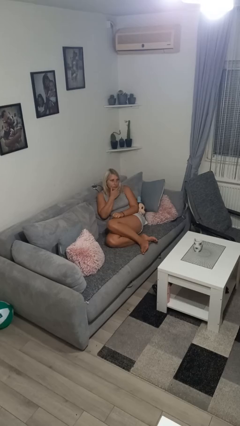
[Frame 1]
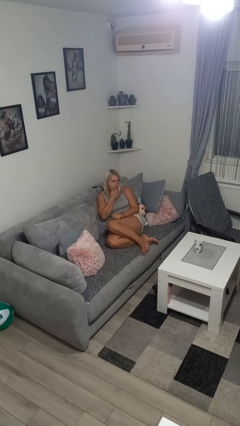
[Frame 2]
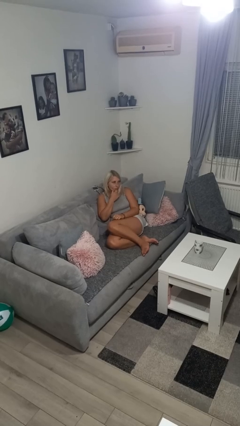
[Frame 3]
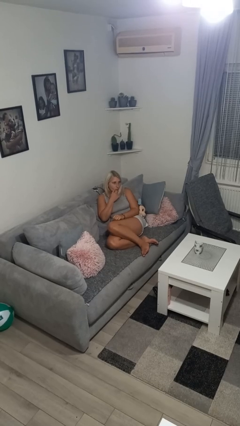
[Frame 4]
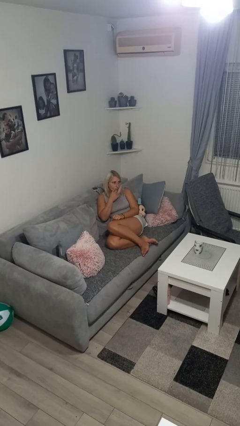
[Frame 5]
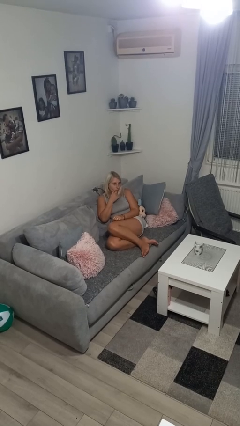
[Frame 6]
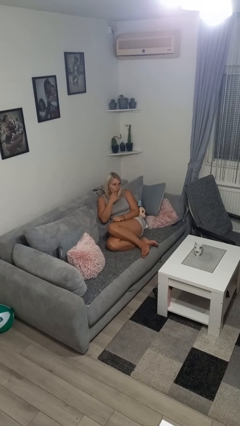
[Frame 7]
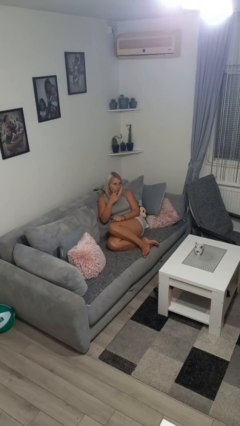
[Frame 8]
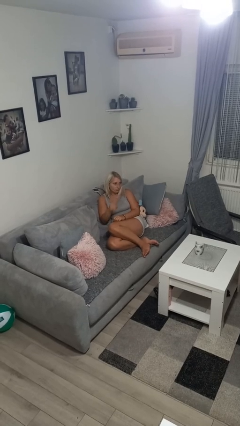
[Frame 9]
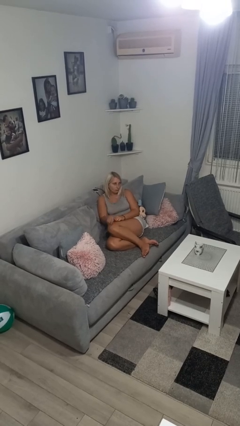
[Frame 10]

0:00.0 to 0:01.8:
person strokes chin

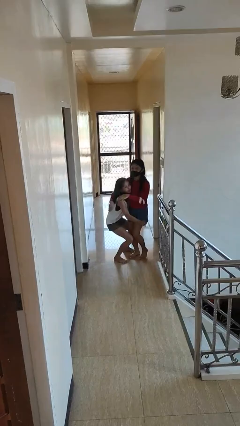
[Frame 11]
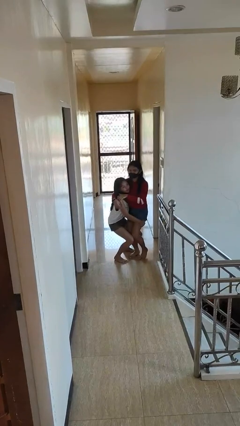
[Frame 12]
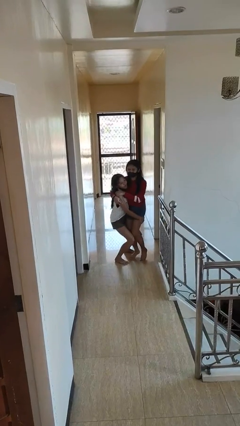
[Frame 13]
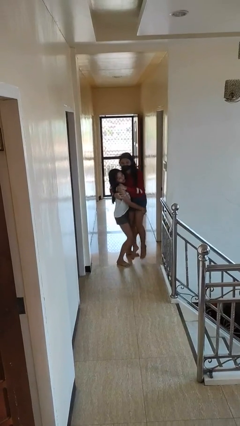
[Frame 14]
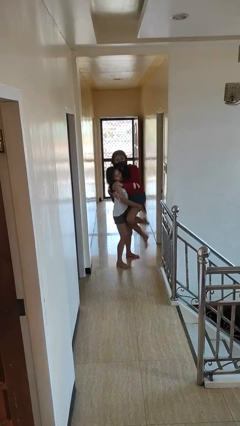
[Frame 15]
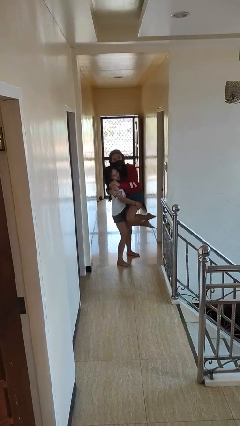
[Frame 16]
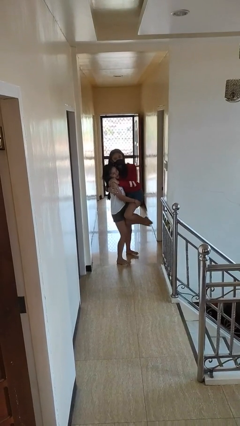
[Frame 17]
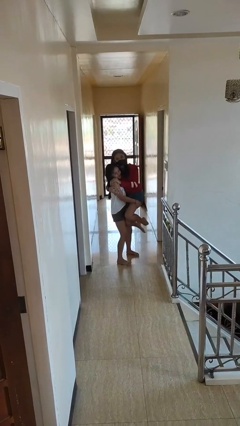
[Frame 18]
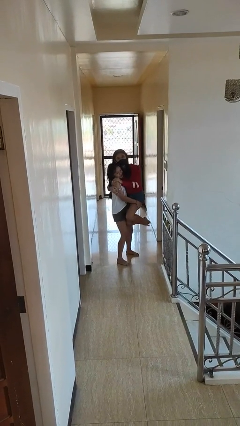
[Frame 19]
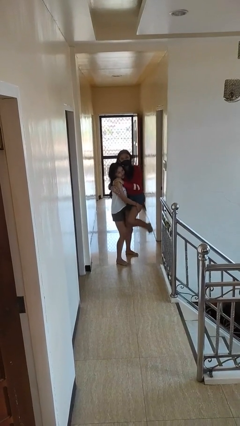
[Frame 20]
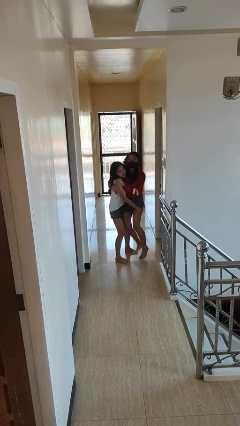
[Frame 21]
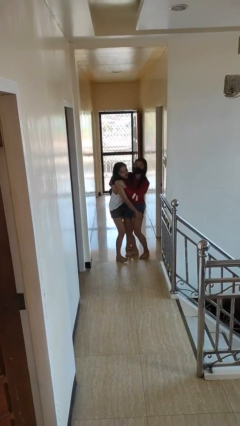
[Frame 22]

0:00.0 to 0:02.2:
person picks up person

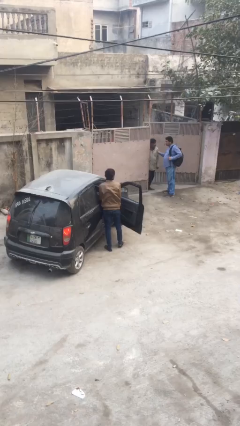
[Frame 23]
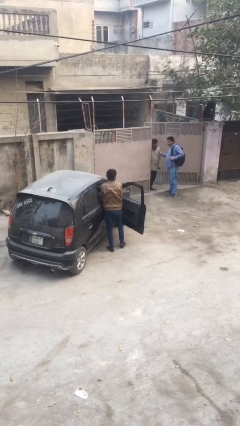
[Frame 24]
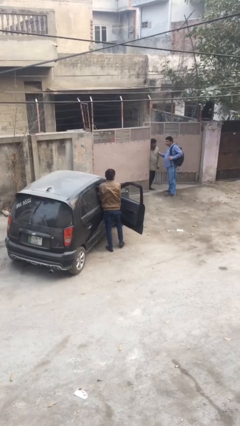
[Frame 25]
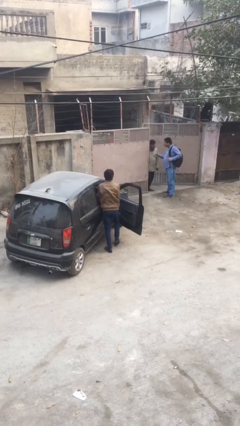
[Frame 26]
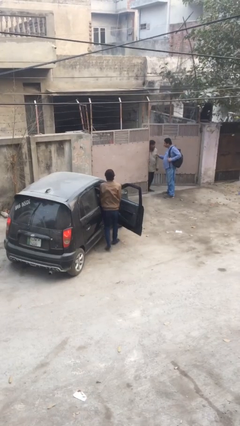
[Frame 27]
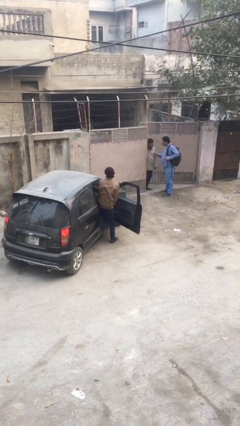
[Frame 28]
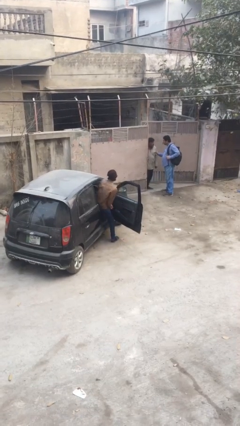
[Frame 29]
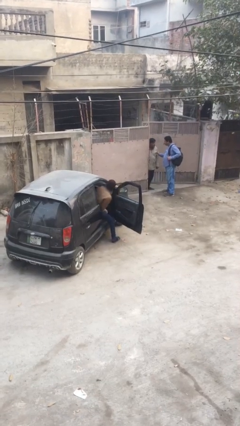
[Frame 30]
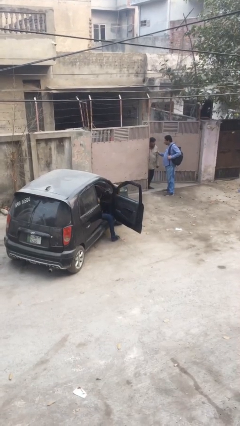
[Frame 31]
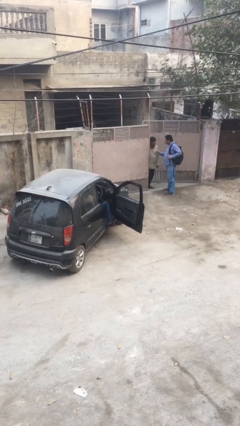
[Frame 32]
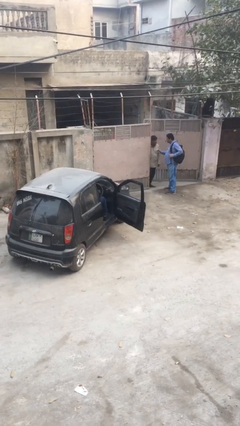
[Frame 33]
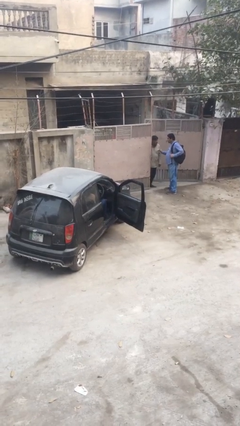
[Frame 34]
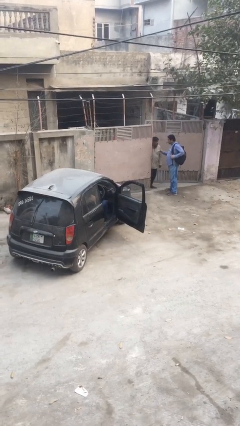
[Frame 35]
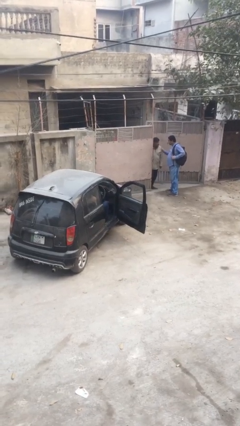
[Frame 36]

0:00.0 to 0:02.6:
person enters car

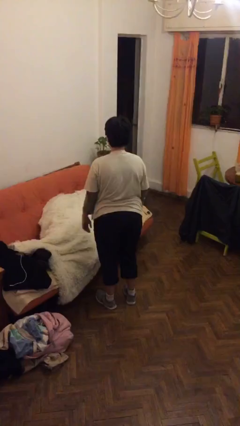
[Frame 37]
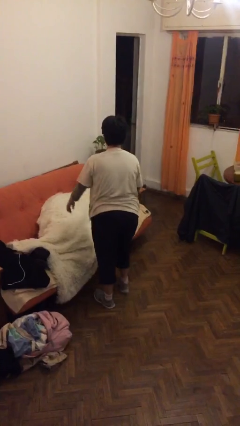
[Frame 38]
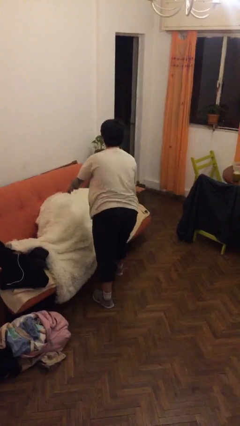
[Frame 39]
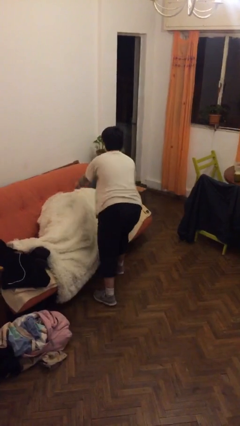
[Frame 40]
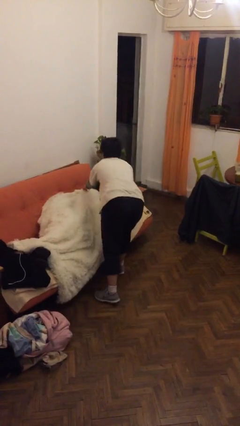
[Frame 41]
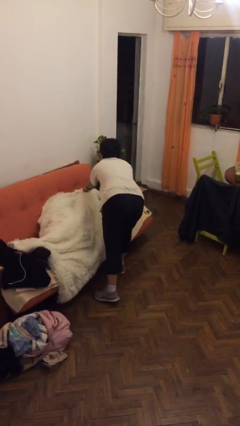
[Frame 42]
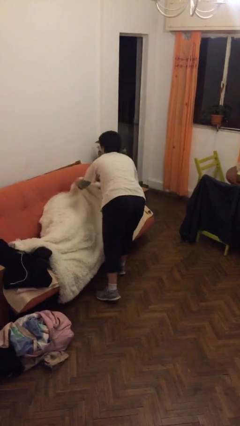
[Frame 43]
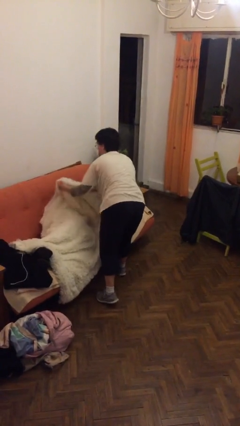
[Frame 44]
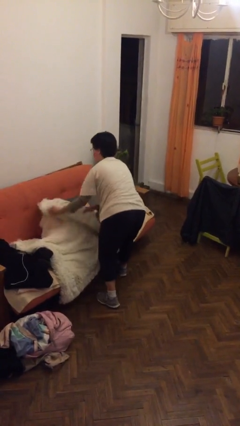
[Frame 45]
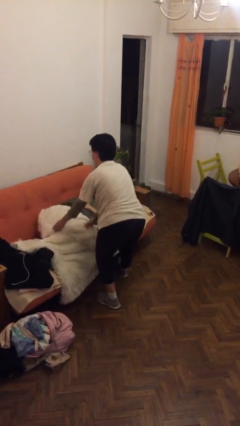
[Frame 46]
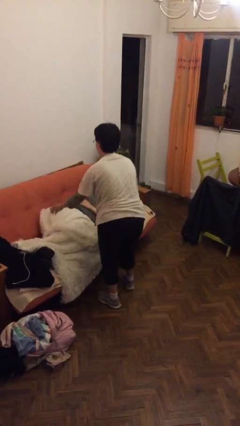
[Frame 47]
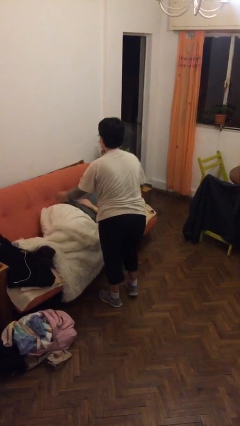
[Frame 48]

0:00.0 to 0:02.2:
person uncovers friend with blanket

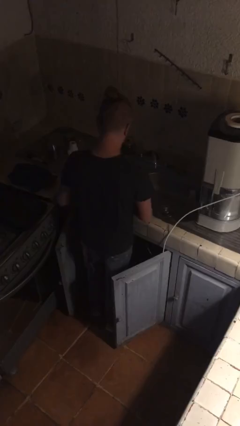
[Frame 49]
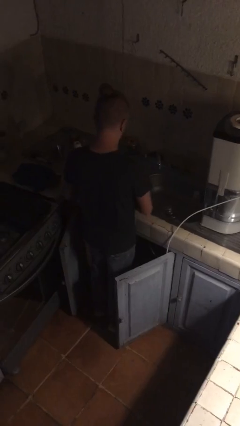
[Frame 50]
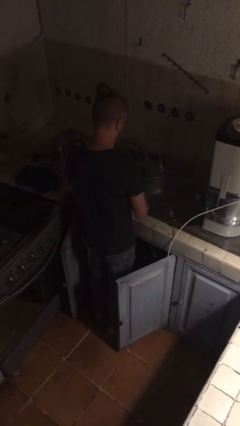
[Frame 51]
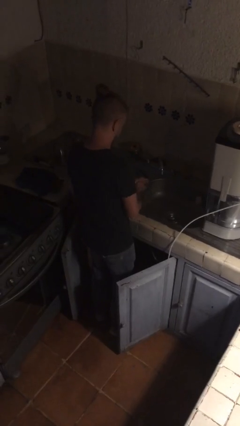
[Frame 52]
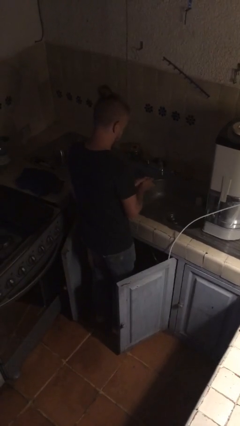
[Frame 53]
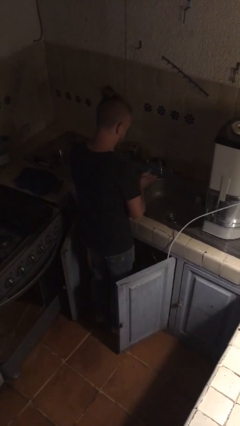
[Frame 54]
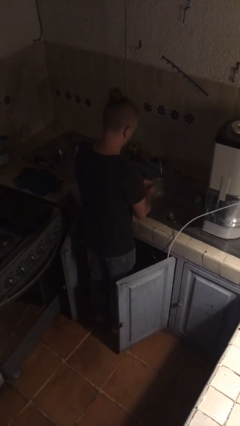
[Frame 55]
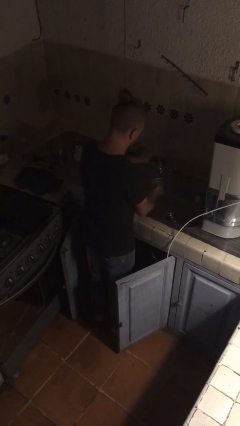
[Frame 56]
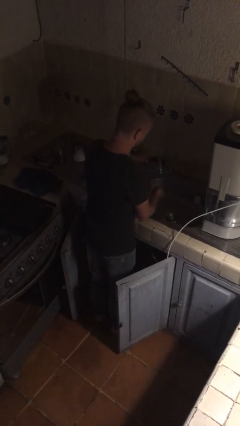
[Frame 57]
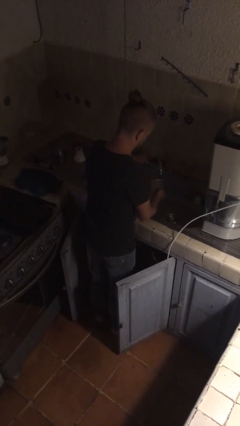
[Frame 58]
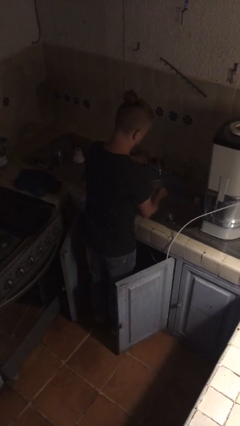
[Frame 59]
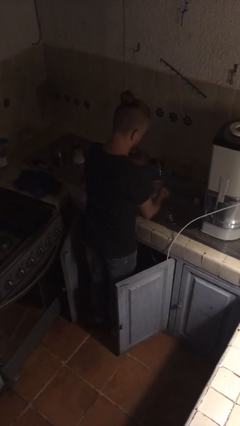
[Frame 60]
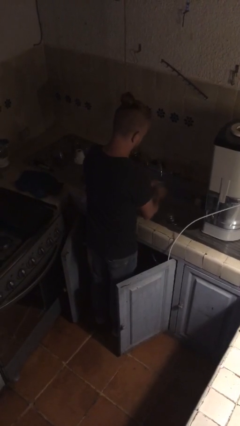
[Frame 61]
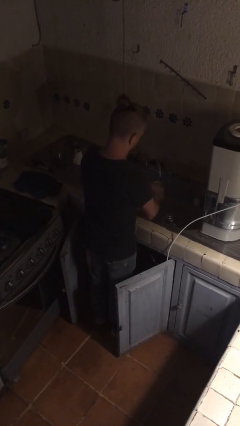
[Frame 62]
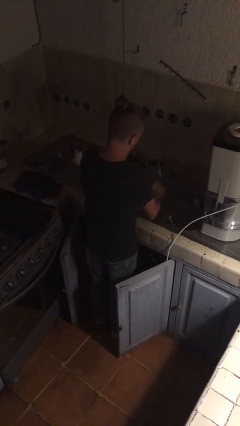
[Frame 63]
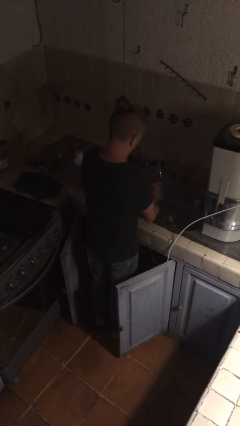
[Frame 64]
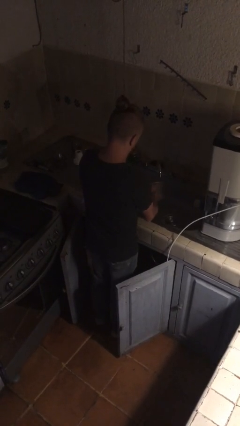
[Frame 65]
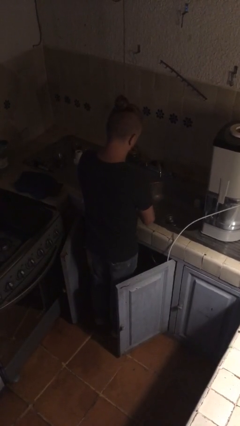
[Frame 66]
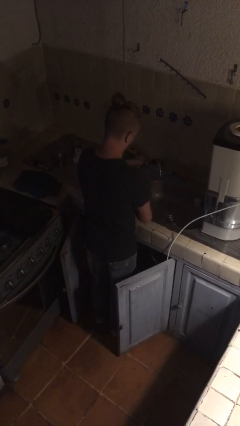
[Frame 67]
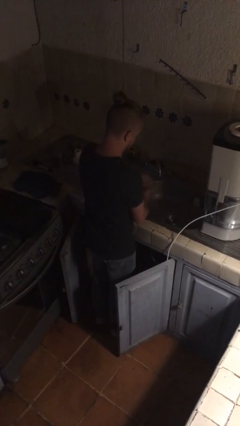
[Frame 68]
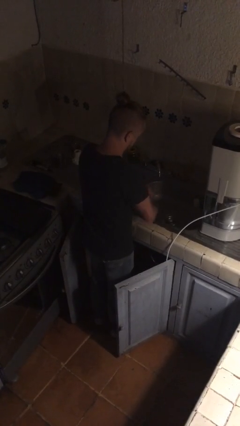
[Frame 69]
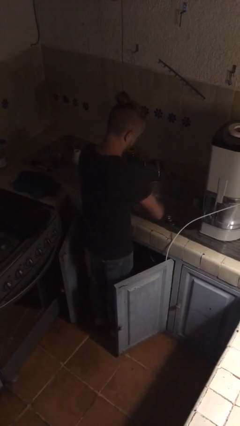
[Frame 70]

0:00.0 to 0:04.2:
person washes hands

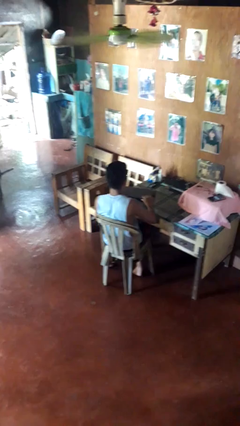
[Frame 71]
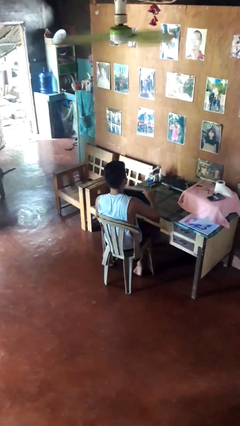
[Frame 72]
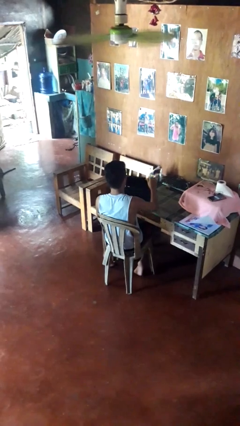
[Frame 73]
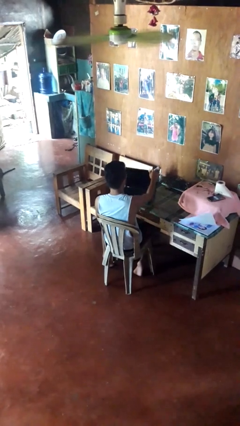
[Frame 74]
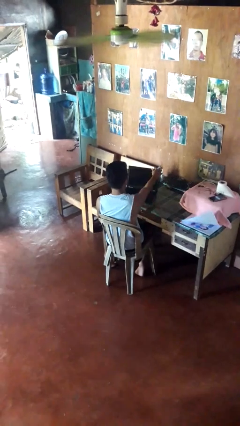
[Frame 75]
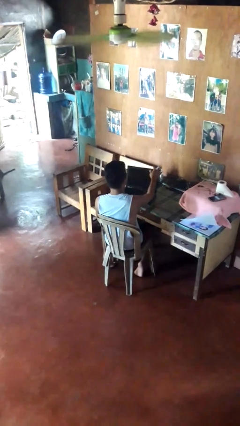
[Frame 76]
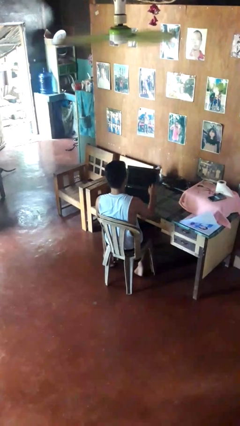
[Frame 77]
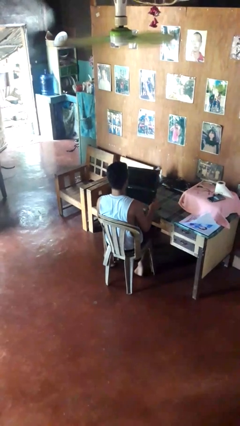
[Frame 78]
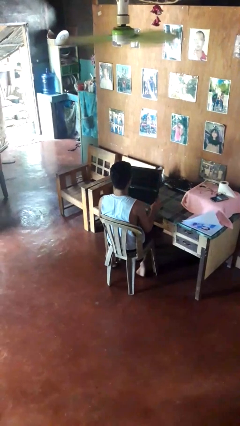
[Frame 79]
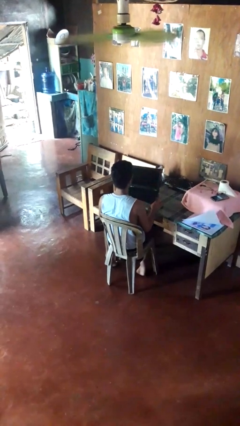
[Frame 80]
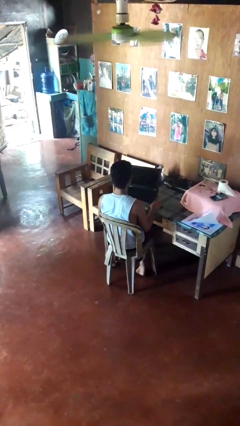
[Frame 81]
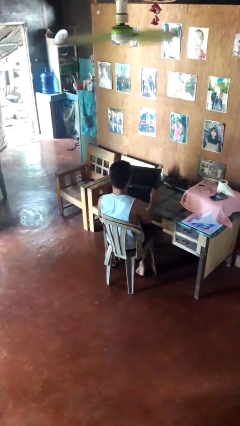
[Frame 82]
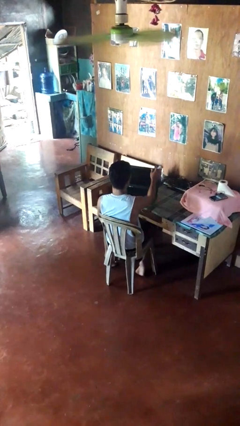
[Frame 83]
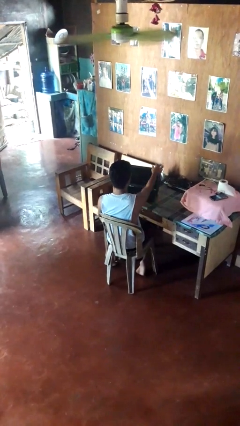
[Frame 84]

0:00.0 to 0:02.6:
person opens laptop

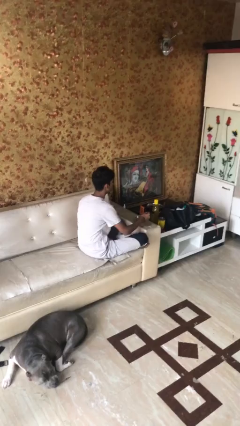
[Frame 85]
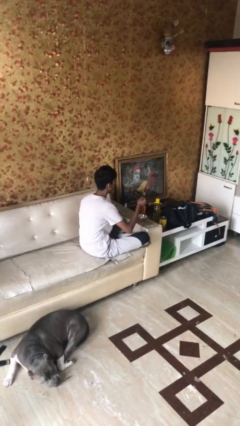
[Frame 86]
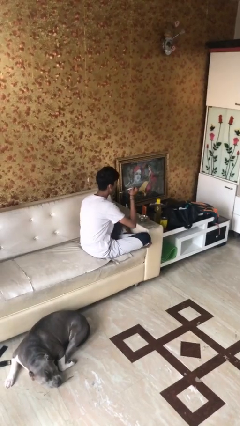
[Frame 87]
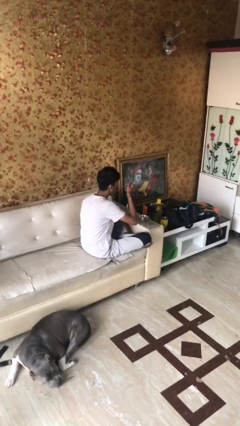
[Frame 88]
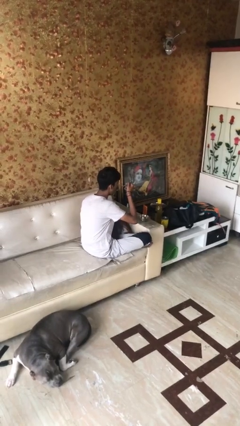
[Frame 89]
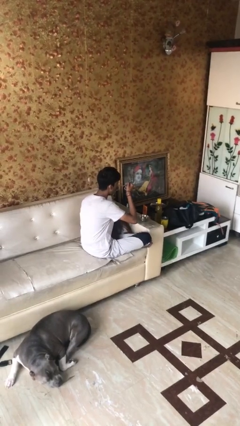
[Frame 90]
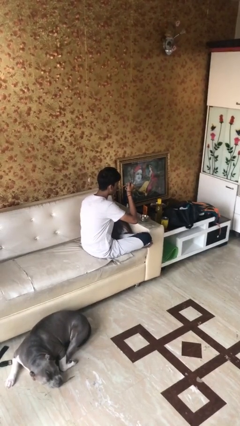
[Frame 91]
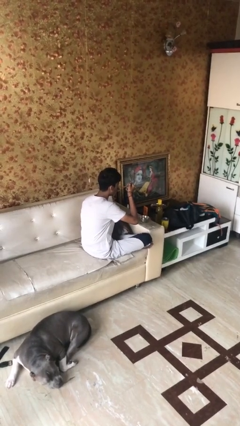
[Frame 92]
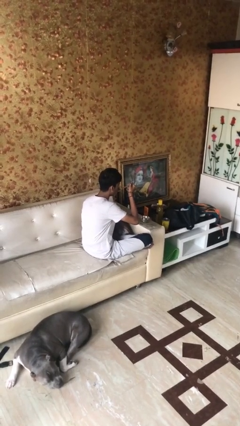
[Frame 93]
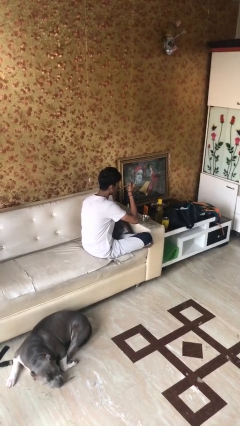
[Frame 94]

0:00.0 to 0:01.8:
person eats with utensil
